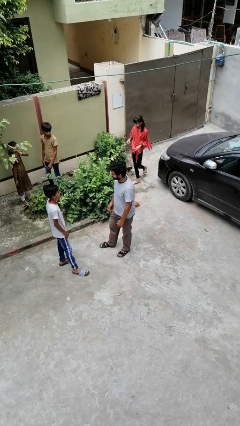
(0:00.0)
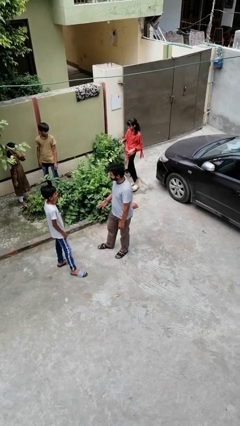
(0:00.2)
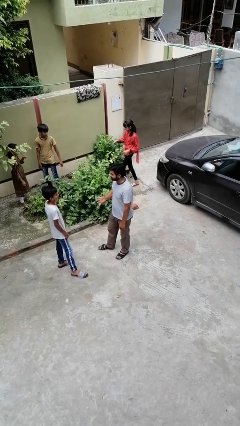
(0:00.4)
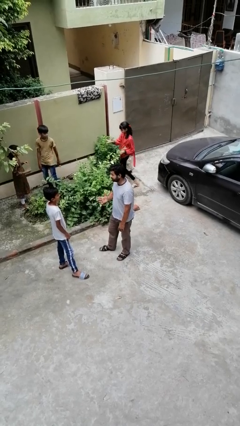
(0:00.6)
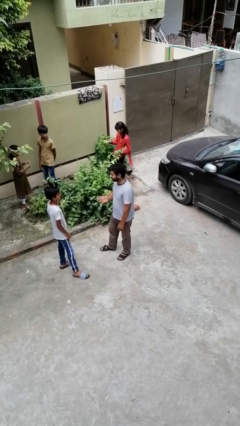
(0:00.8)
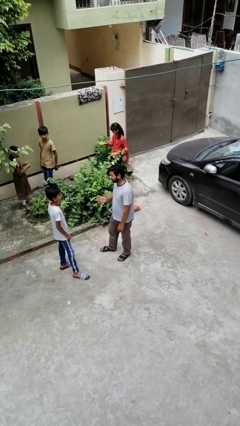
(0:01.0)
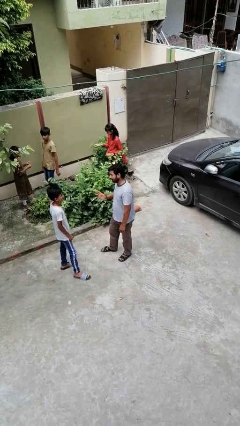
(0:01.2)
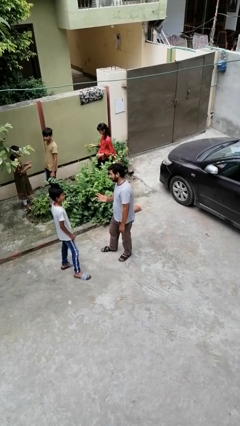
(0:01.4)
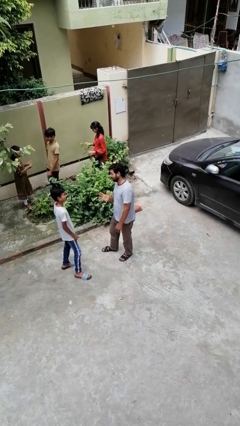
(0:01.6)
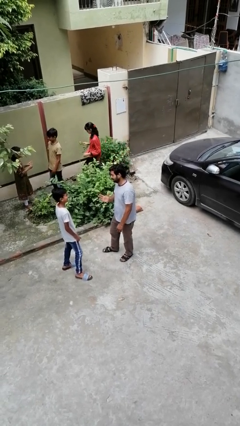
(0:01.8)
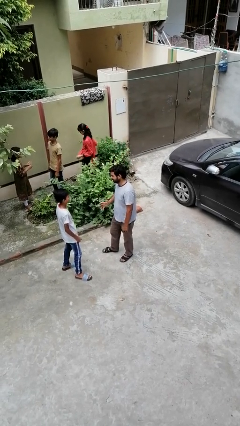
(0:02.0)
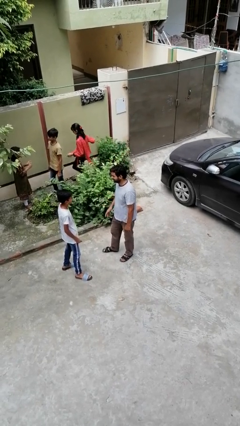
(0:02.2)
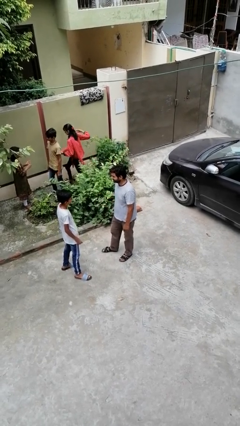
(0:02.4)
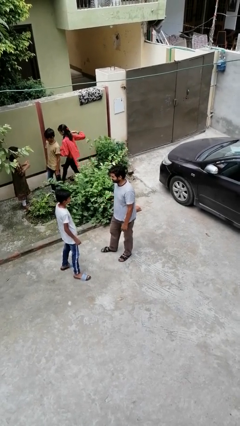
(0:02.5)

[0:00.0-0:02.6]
person talks to person

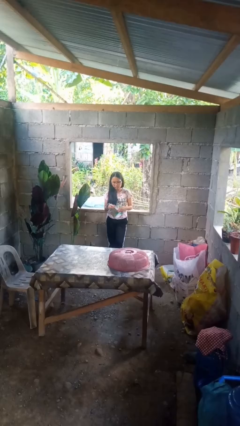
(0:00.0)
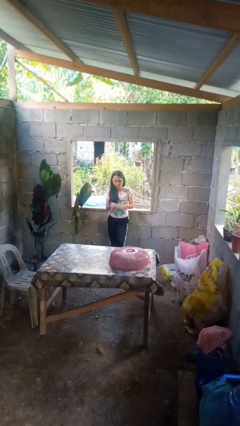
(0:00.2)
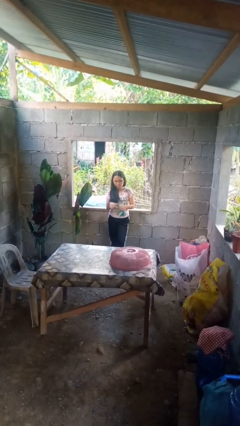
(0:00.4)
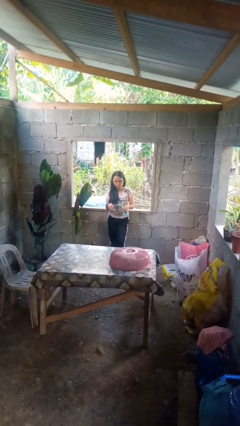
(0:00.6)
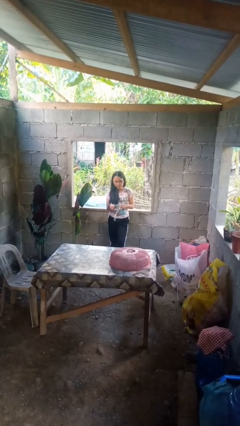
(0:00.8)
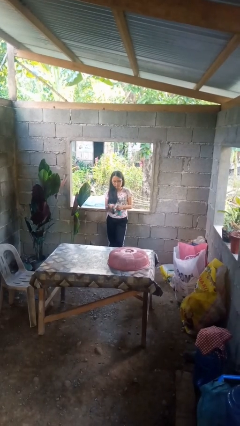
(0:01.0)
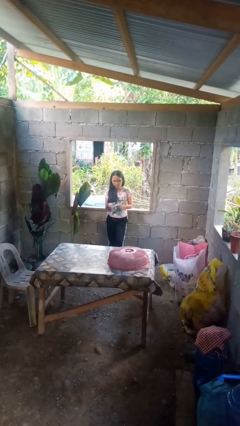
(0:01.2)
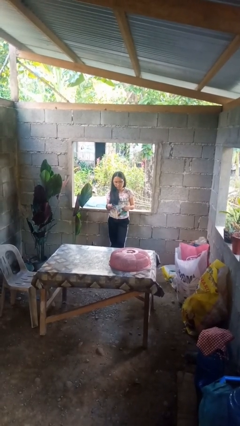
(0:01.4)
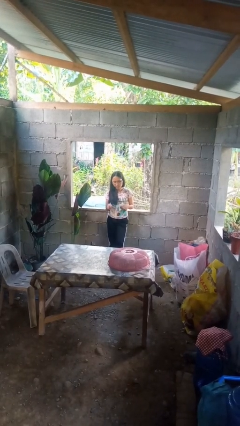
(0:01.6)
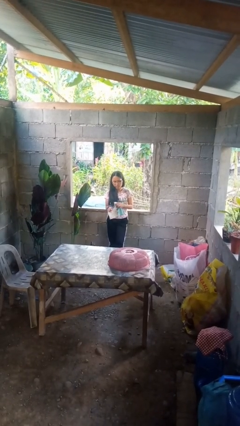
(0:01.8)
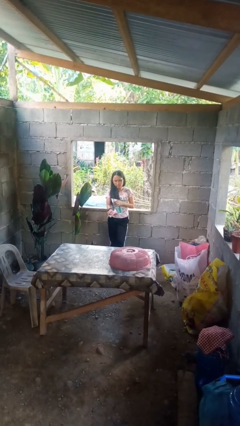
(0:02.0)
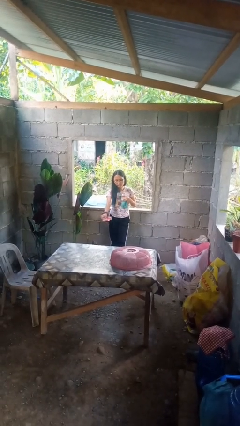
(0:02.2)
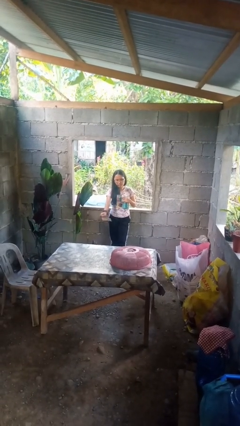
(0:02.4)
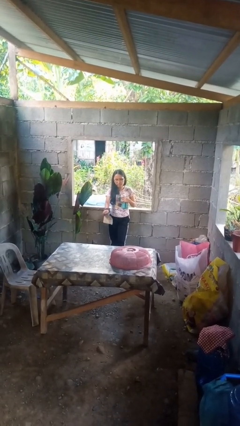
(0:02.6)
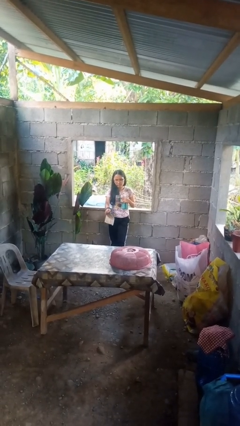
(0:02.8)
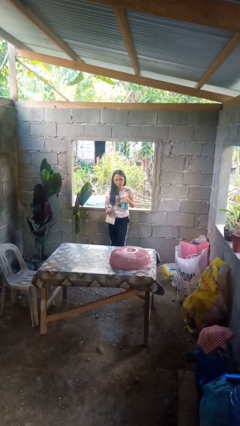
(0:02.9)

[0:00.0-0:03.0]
person tears paper

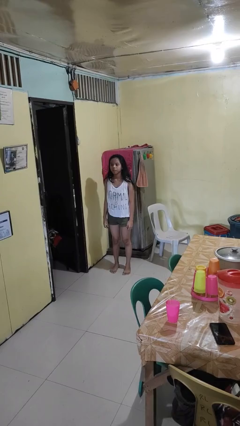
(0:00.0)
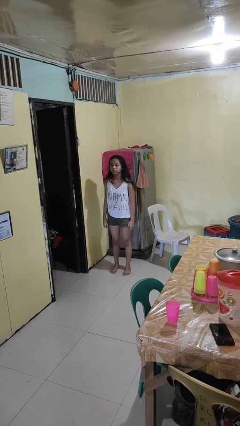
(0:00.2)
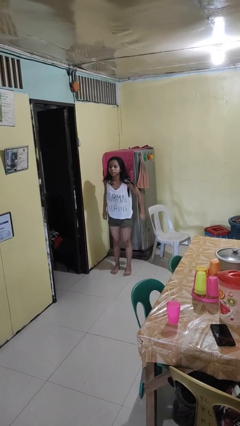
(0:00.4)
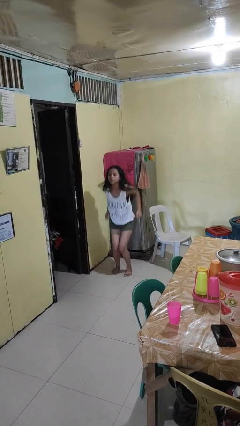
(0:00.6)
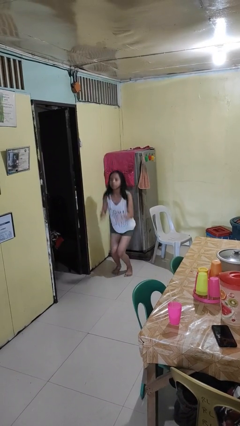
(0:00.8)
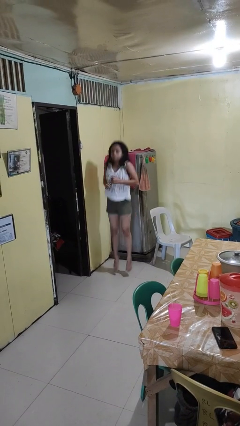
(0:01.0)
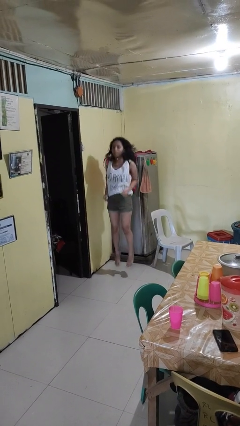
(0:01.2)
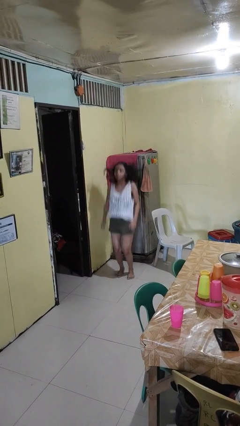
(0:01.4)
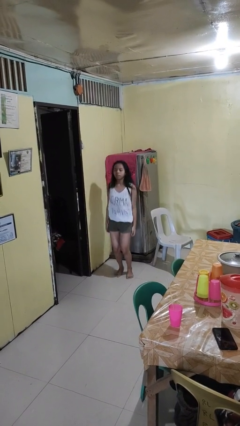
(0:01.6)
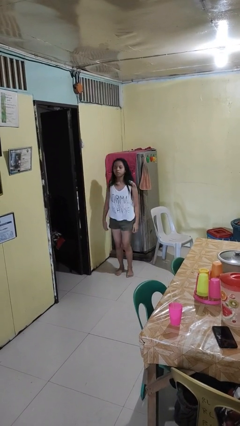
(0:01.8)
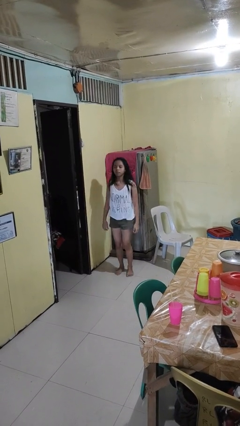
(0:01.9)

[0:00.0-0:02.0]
person jumps

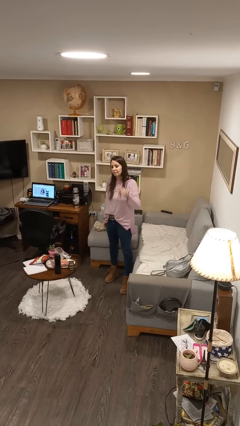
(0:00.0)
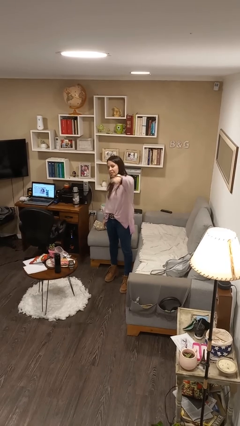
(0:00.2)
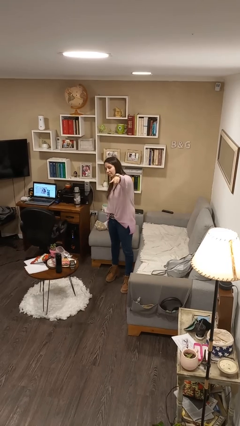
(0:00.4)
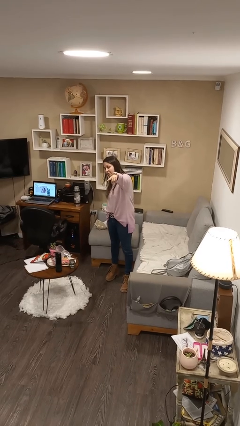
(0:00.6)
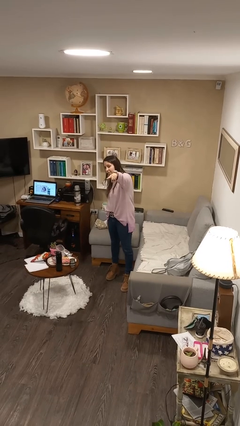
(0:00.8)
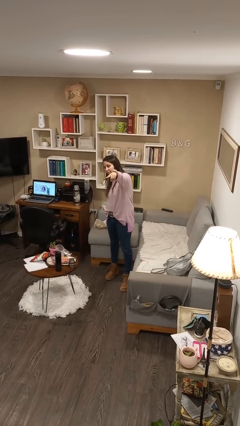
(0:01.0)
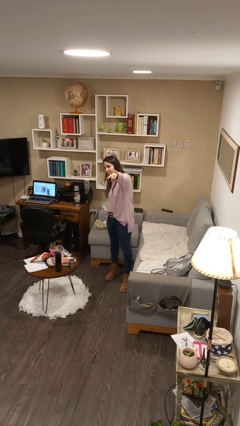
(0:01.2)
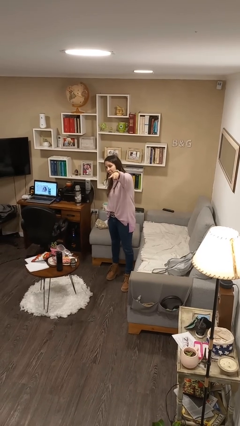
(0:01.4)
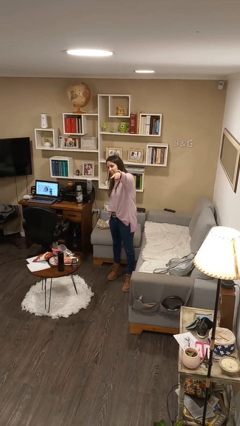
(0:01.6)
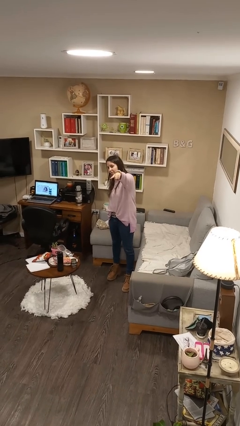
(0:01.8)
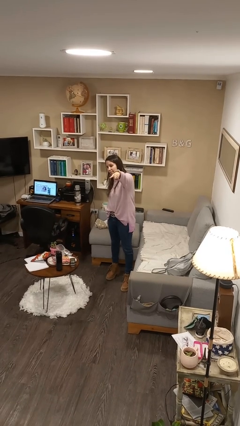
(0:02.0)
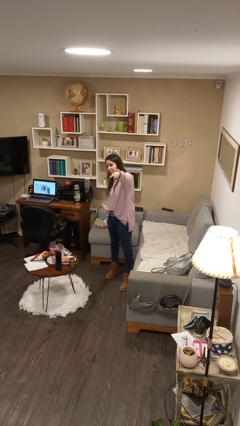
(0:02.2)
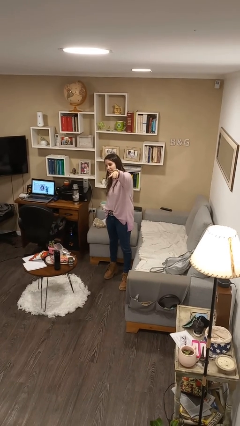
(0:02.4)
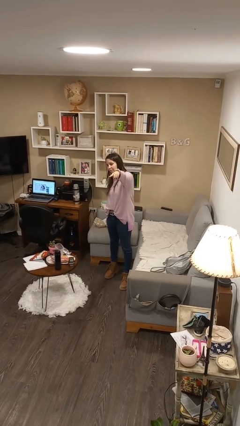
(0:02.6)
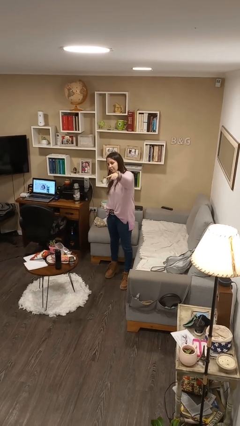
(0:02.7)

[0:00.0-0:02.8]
person points at person

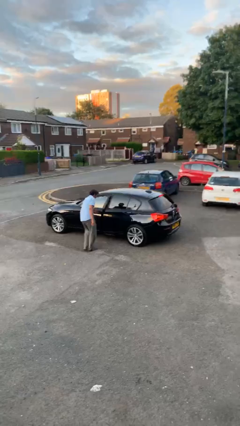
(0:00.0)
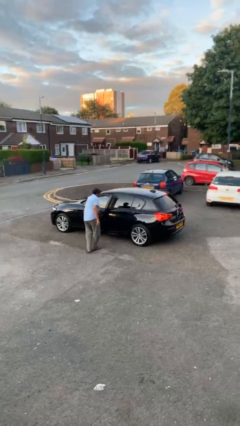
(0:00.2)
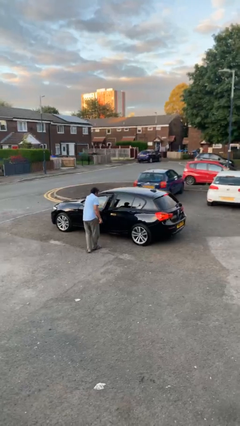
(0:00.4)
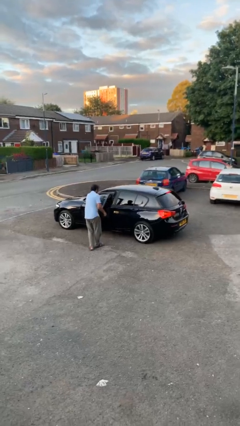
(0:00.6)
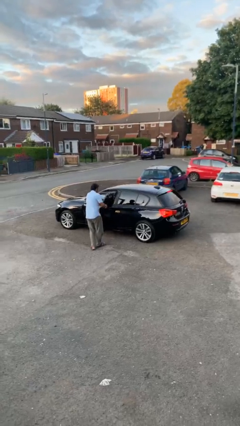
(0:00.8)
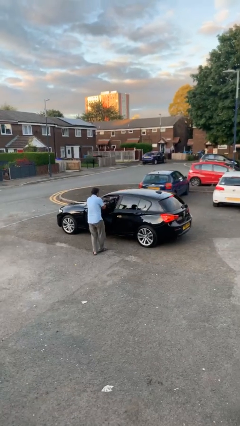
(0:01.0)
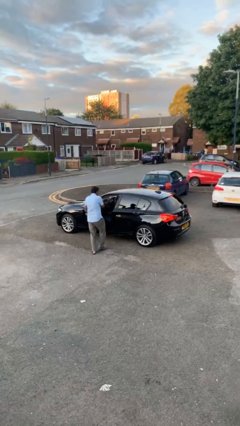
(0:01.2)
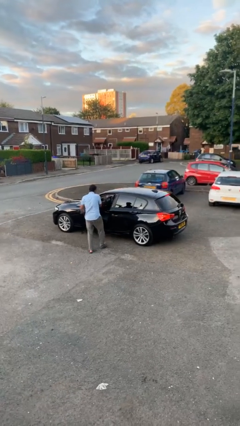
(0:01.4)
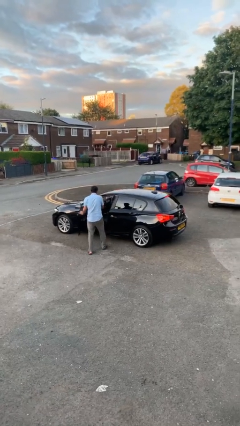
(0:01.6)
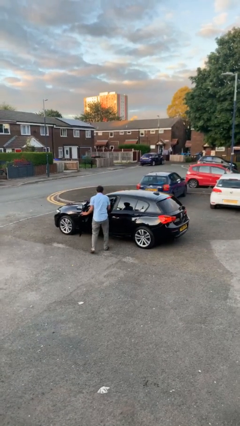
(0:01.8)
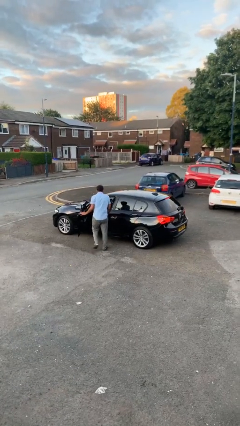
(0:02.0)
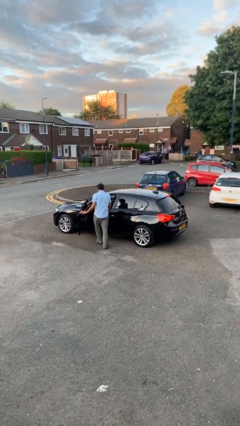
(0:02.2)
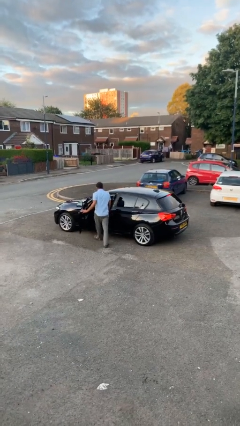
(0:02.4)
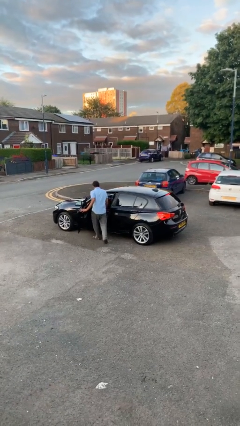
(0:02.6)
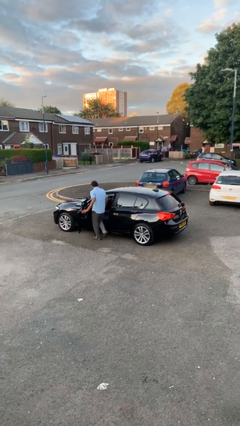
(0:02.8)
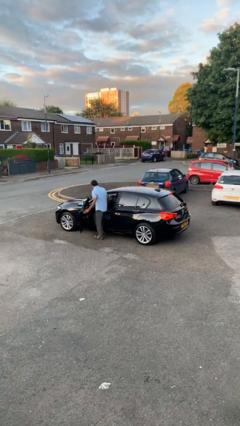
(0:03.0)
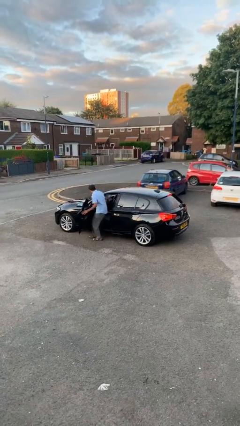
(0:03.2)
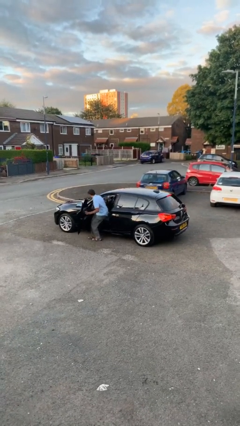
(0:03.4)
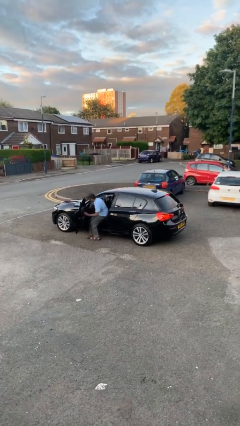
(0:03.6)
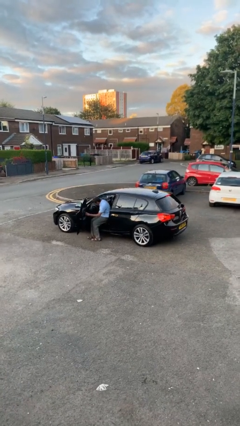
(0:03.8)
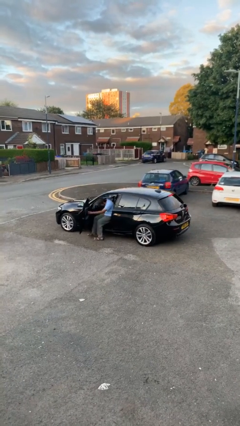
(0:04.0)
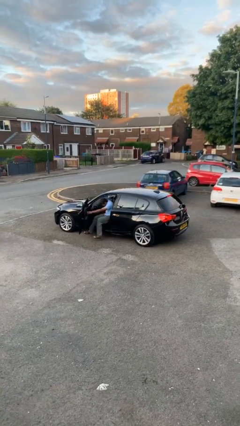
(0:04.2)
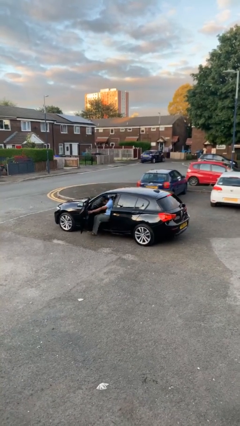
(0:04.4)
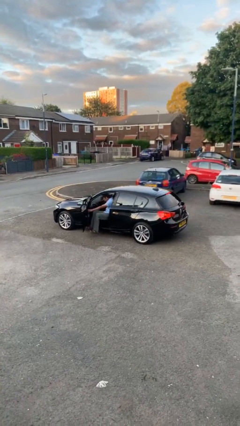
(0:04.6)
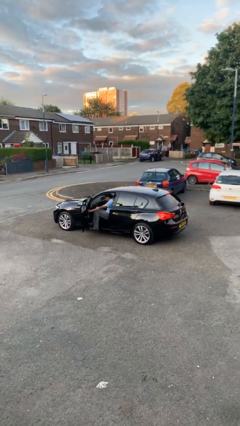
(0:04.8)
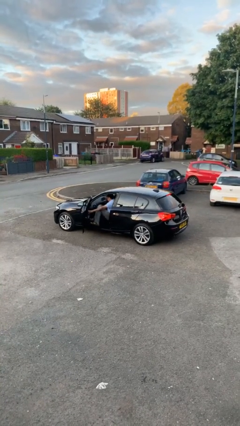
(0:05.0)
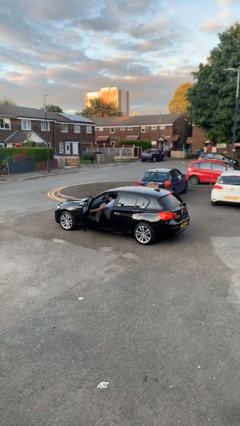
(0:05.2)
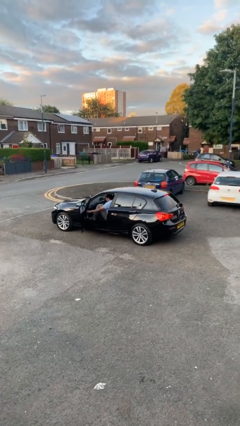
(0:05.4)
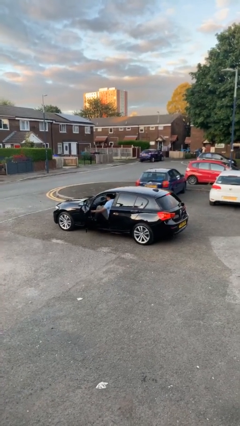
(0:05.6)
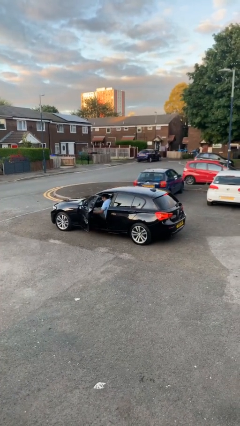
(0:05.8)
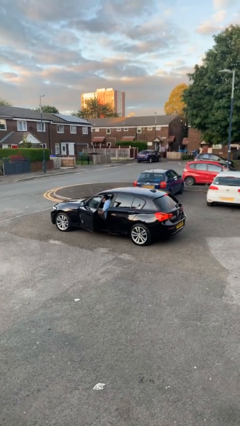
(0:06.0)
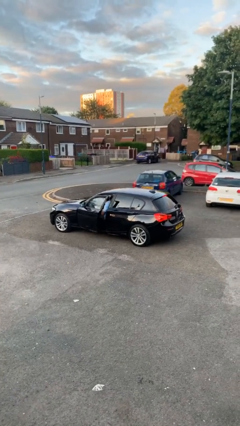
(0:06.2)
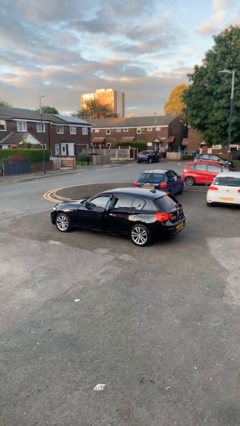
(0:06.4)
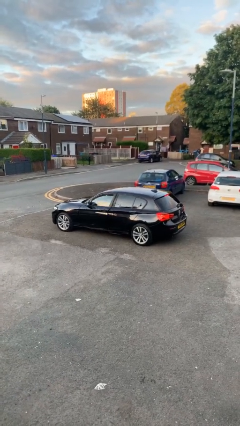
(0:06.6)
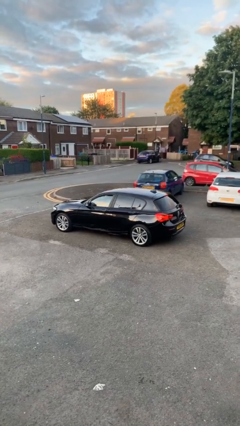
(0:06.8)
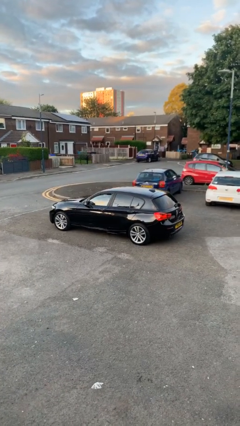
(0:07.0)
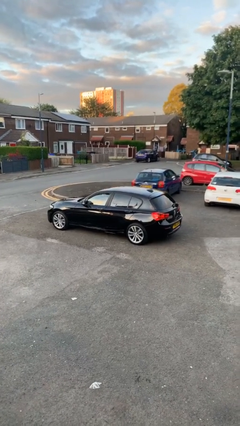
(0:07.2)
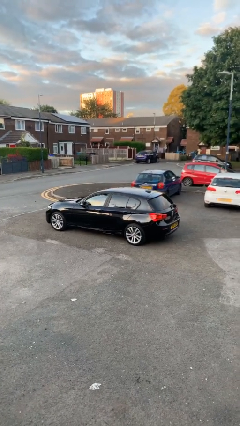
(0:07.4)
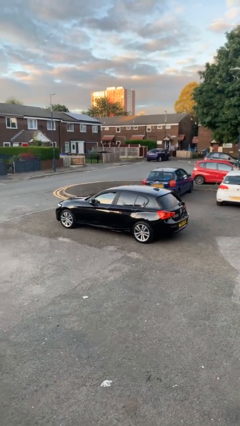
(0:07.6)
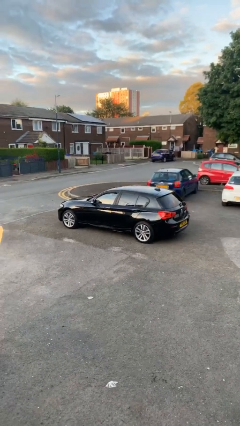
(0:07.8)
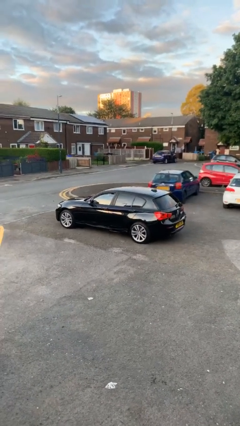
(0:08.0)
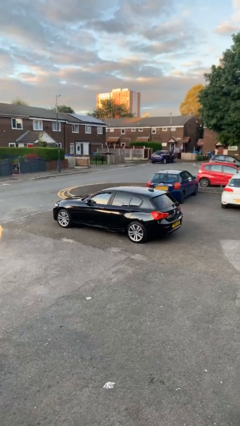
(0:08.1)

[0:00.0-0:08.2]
car picks up person
